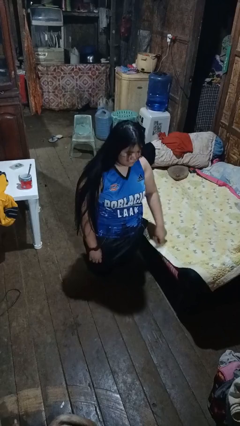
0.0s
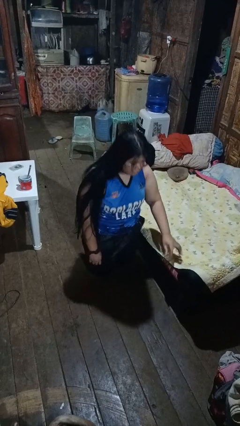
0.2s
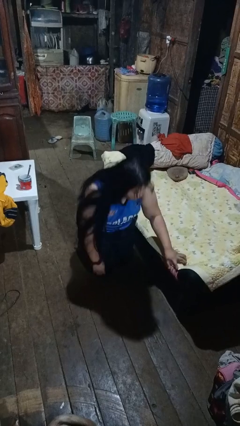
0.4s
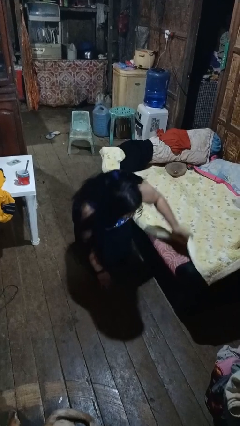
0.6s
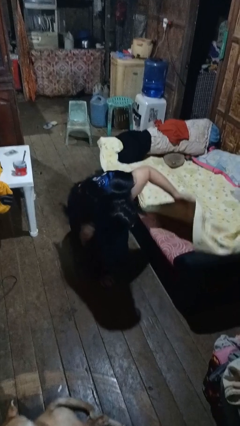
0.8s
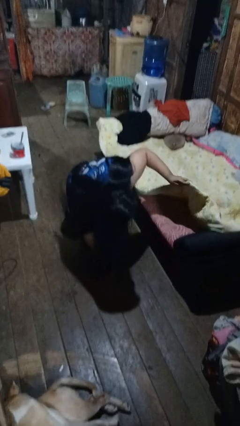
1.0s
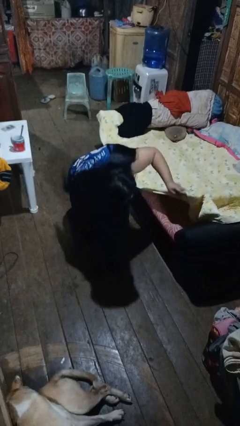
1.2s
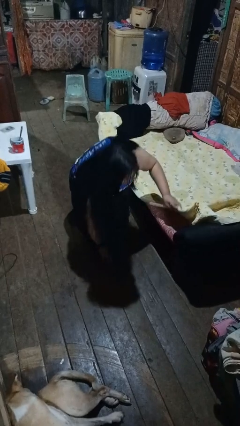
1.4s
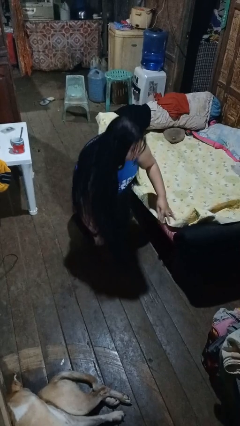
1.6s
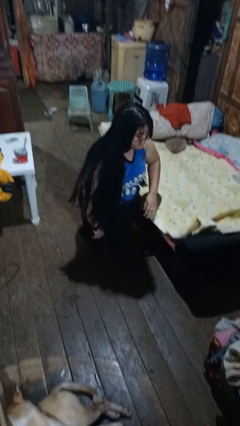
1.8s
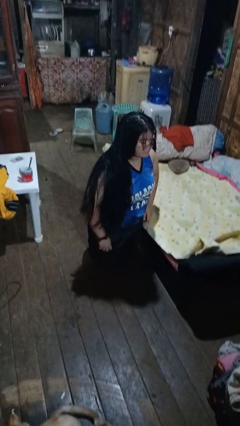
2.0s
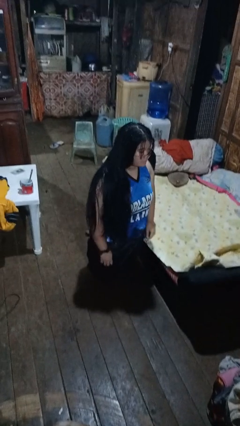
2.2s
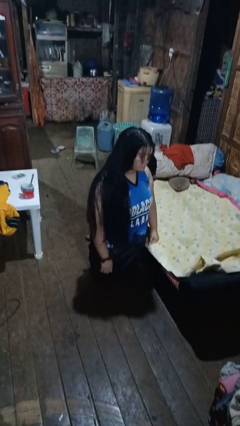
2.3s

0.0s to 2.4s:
person searches under bed

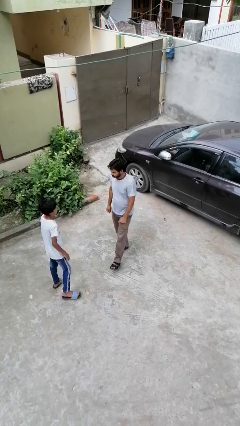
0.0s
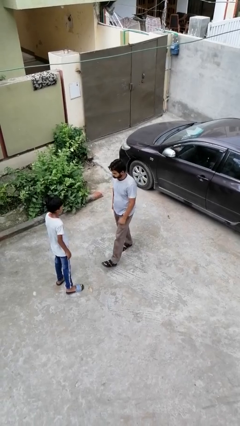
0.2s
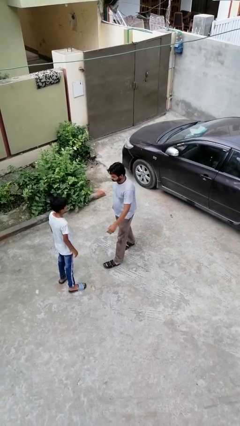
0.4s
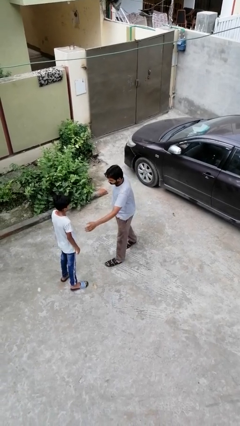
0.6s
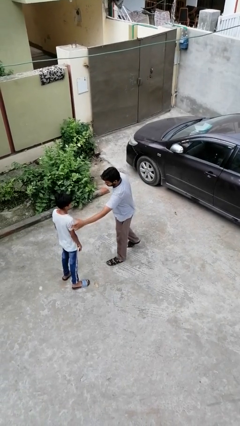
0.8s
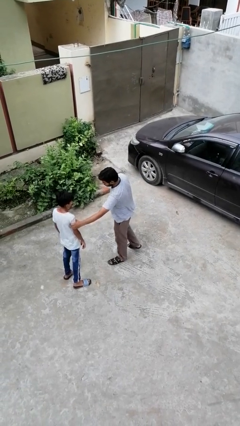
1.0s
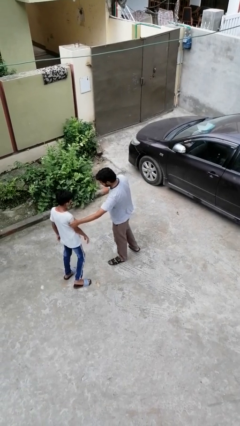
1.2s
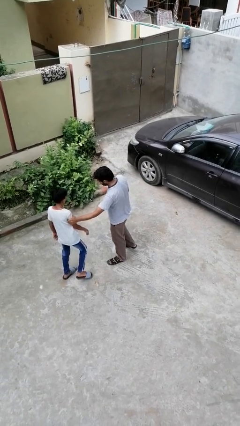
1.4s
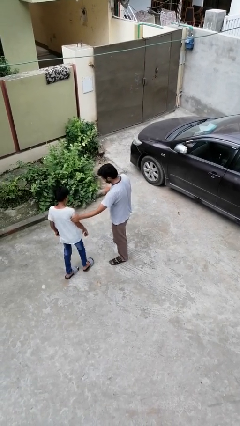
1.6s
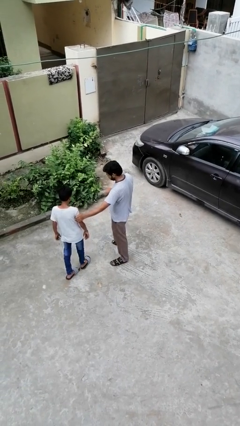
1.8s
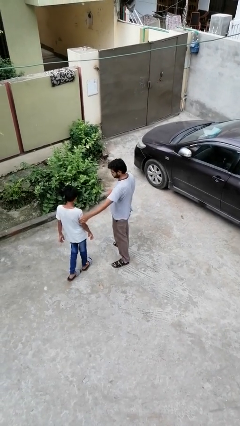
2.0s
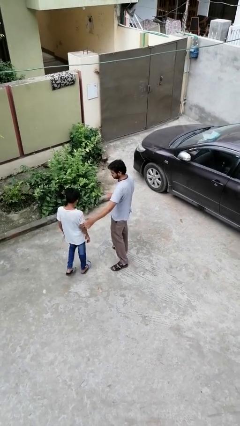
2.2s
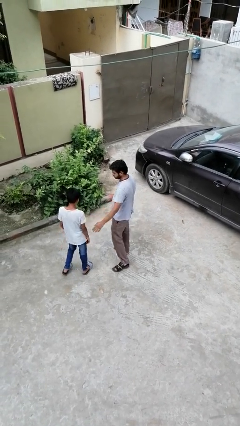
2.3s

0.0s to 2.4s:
person grabs person by bicep

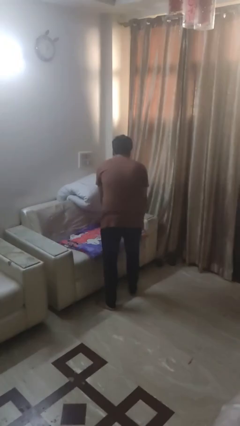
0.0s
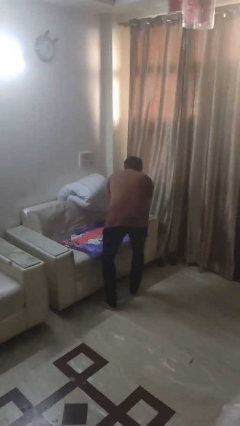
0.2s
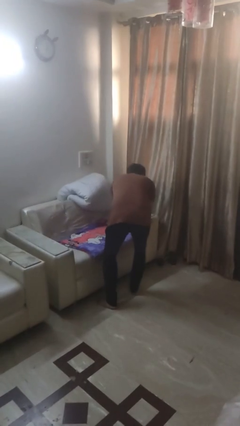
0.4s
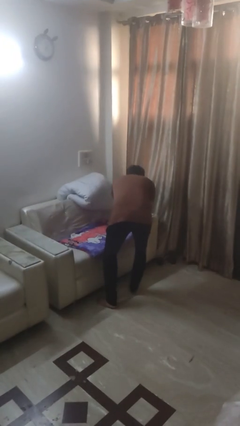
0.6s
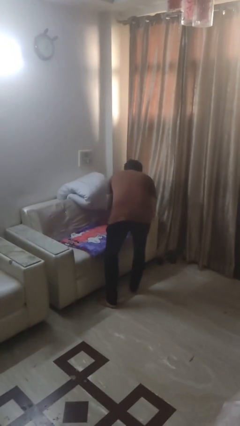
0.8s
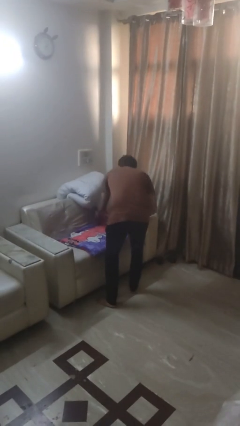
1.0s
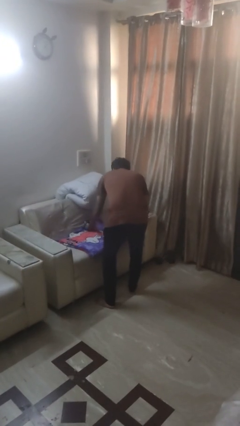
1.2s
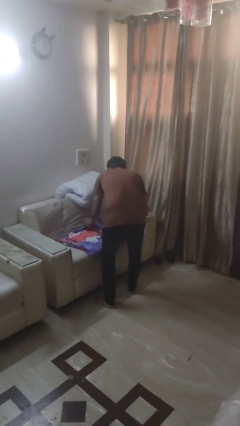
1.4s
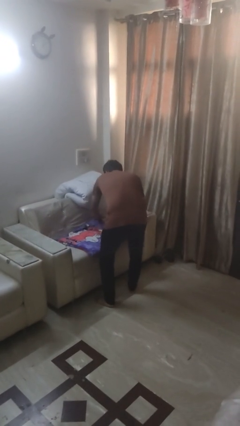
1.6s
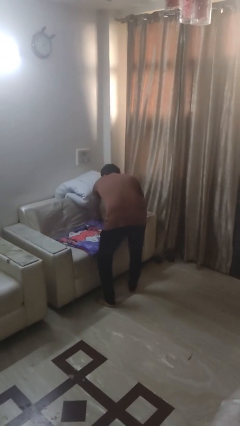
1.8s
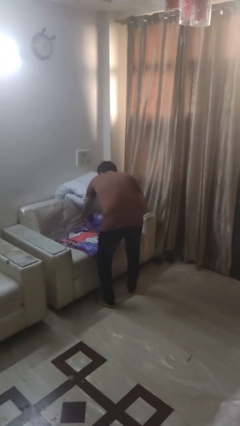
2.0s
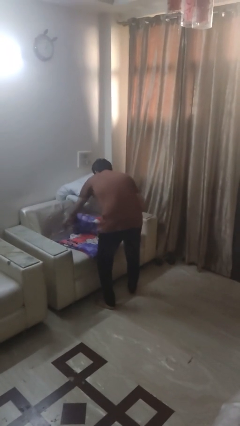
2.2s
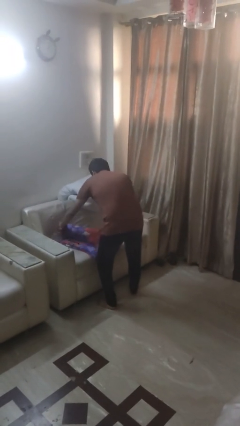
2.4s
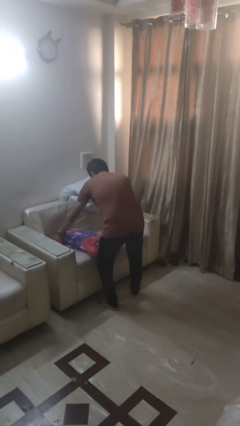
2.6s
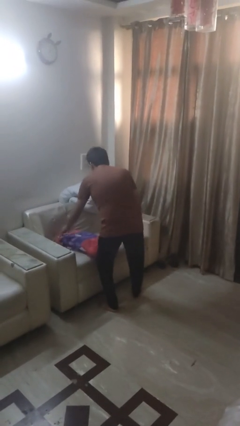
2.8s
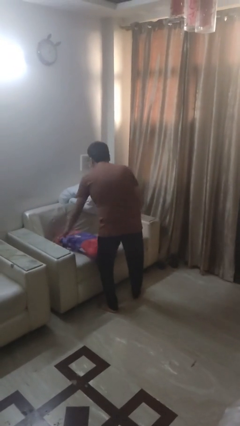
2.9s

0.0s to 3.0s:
person folds blanket

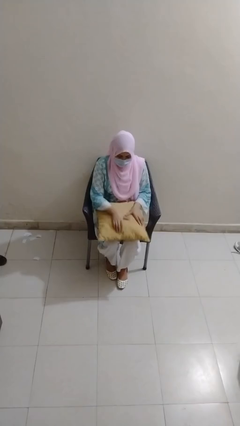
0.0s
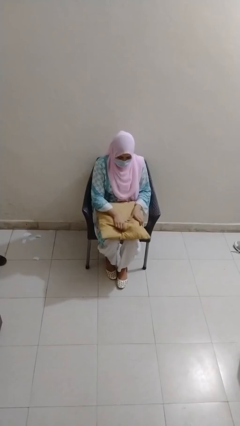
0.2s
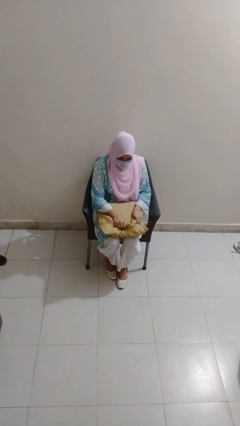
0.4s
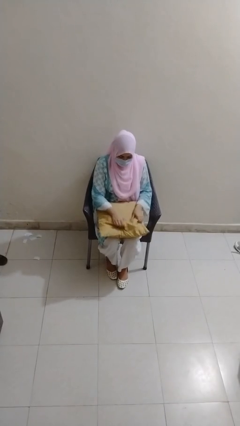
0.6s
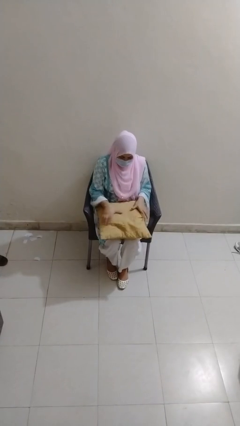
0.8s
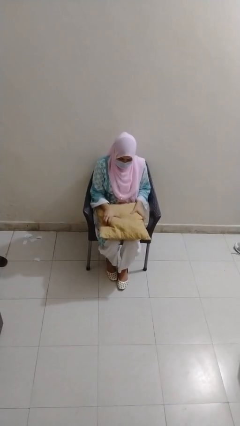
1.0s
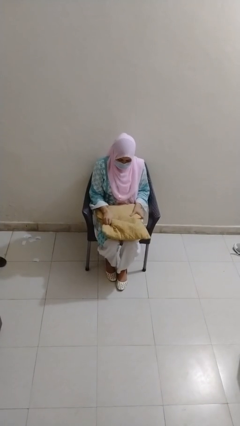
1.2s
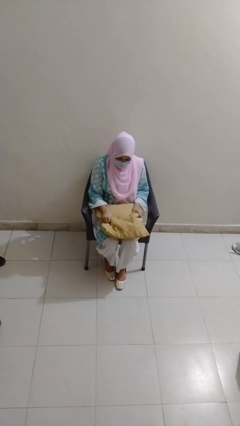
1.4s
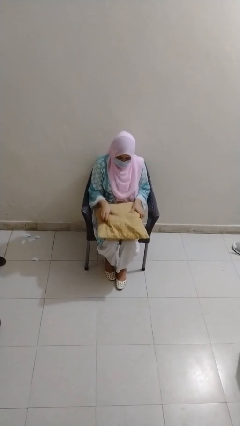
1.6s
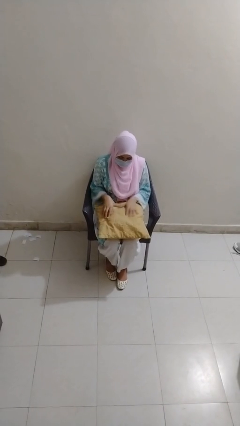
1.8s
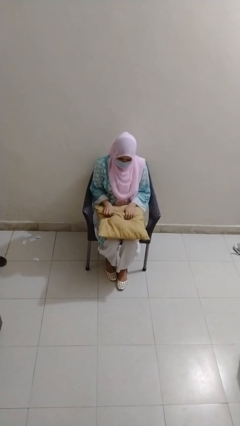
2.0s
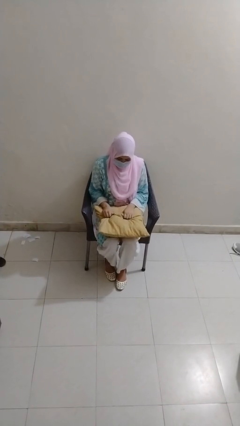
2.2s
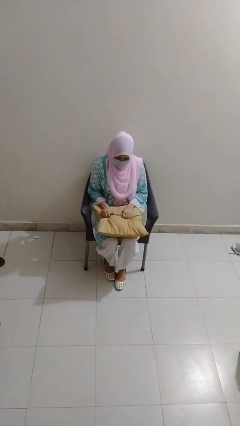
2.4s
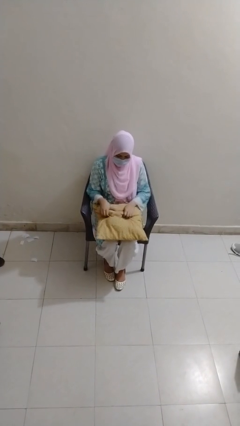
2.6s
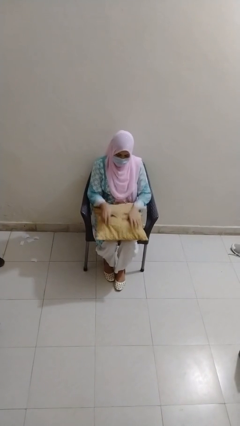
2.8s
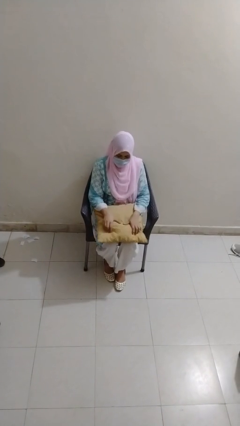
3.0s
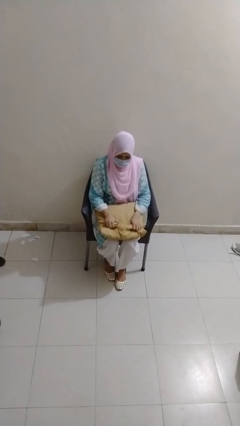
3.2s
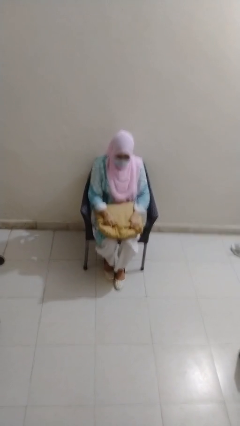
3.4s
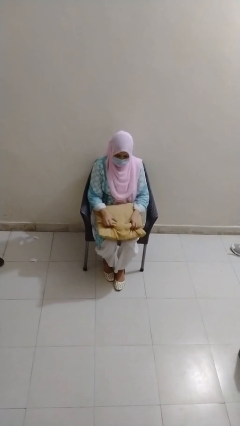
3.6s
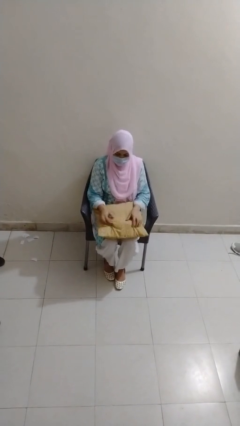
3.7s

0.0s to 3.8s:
person squeezes object

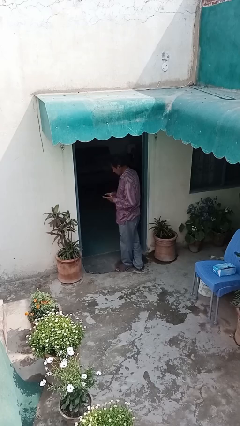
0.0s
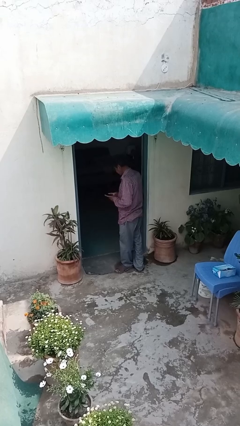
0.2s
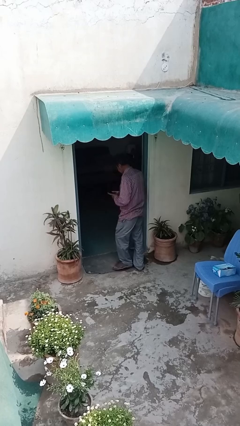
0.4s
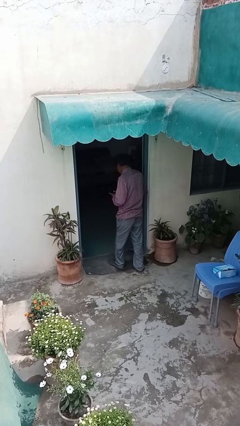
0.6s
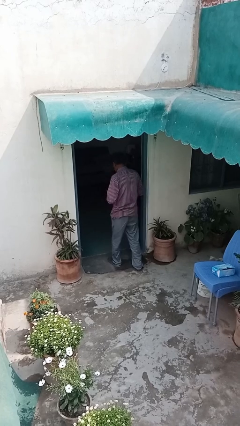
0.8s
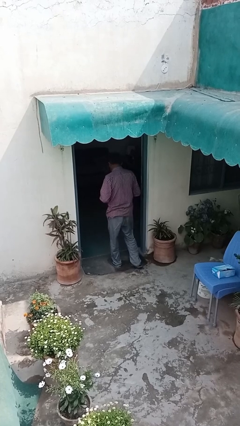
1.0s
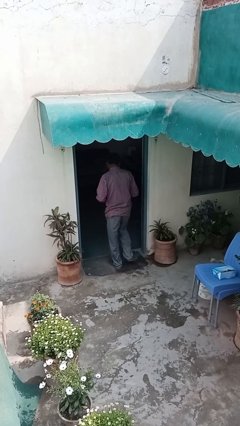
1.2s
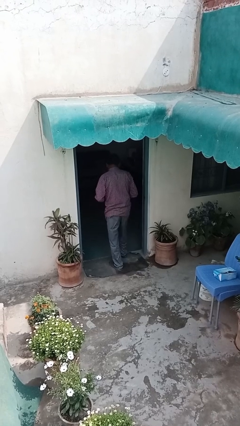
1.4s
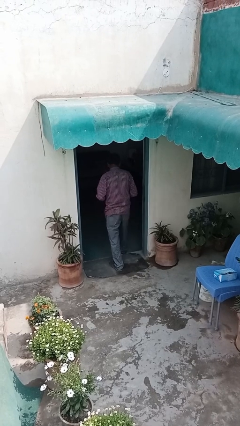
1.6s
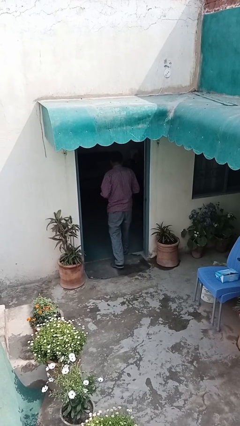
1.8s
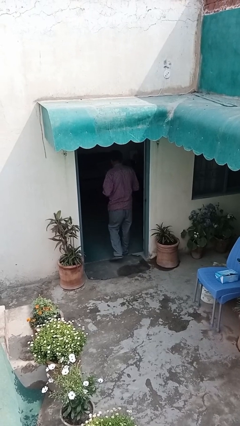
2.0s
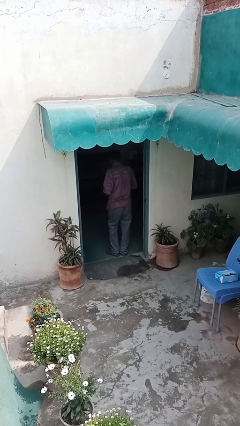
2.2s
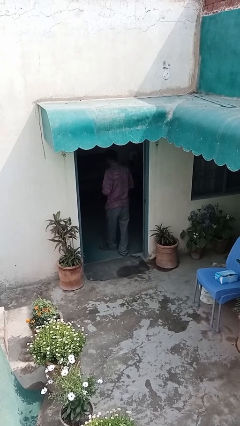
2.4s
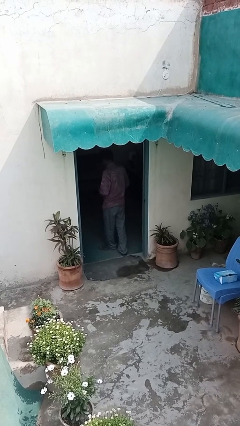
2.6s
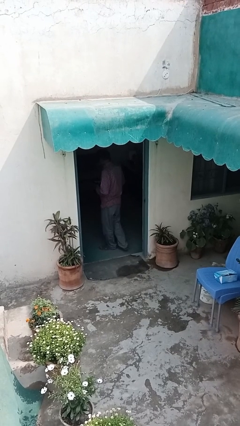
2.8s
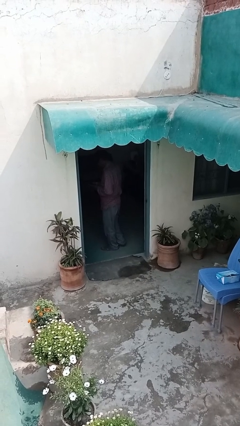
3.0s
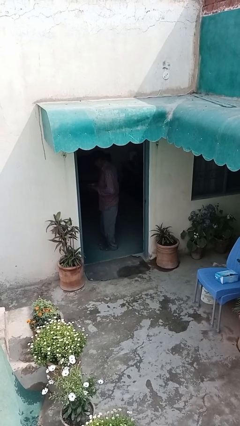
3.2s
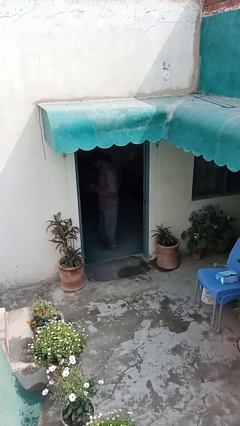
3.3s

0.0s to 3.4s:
person exits scene through structure

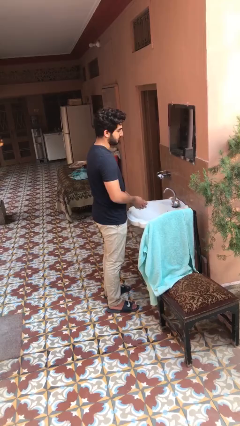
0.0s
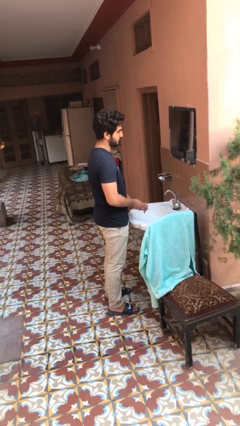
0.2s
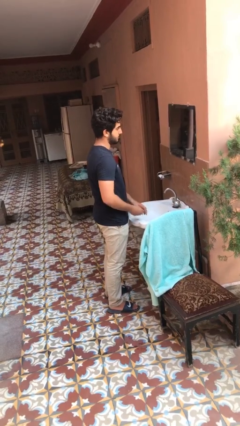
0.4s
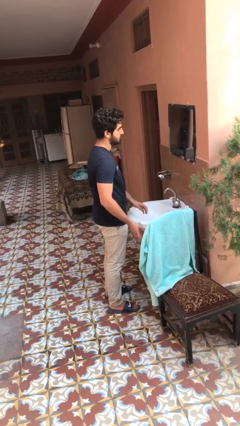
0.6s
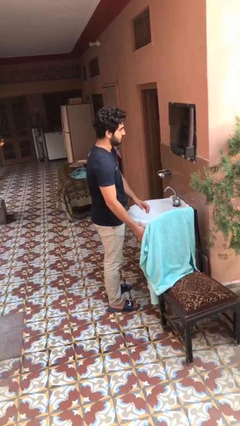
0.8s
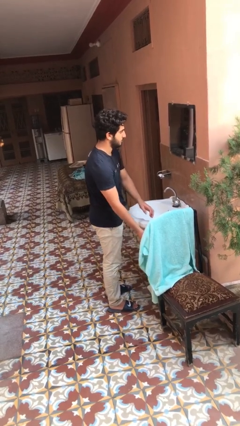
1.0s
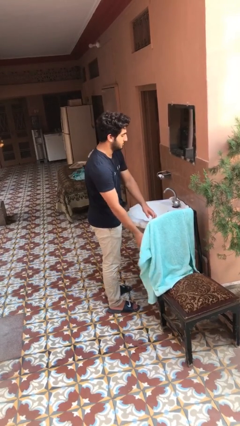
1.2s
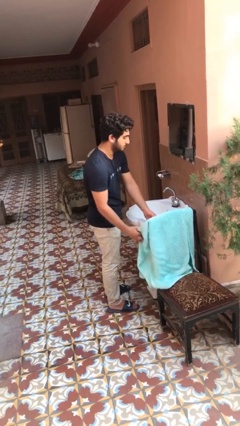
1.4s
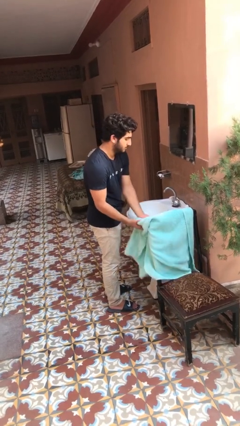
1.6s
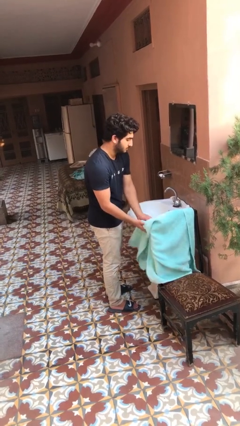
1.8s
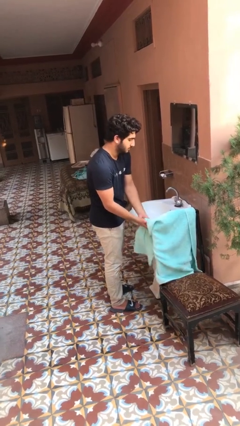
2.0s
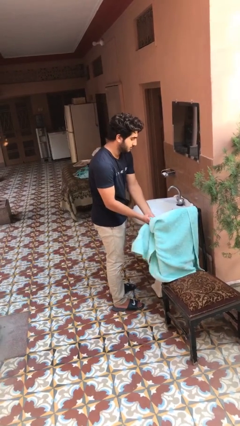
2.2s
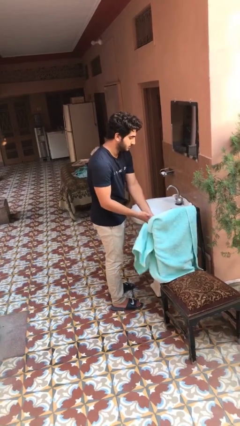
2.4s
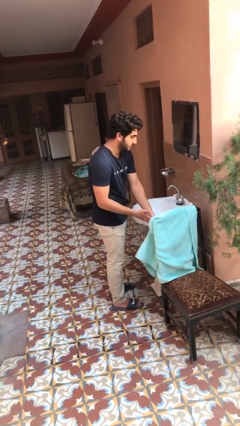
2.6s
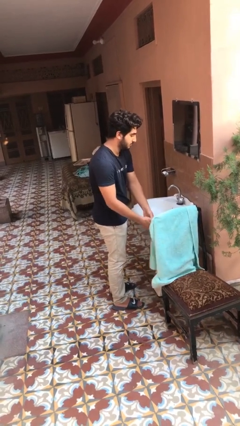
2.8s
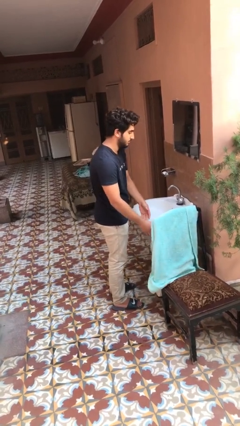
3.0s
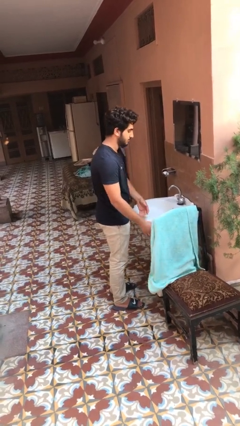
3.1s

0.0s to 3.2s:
person dries hands with towel
